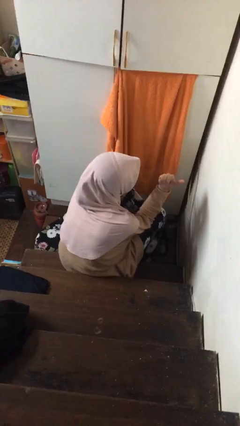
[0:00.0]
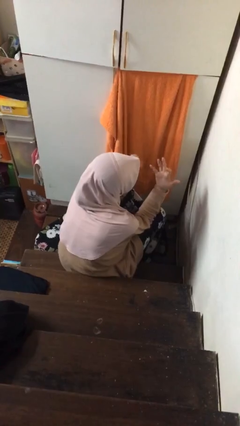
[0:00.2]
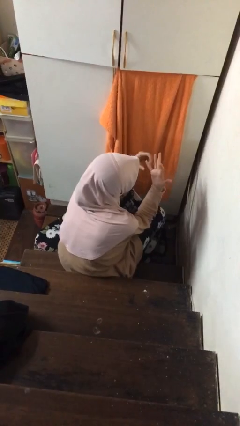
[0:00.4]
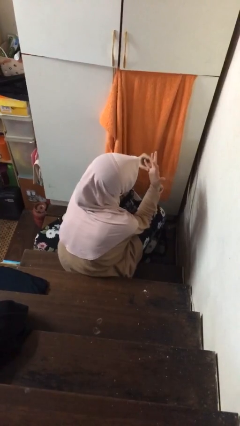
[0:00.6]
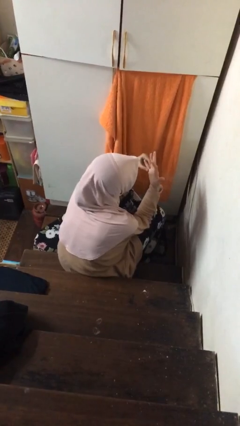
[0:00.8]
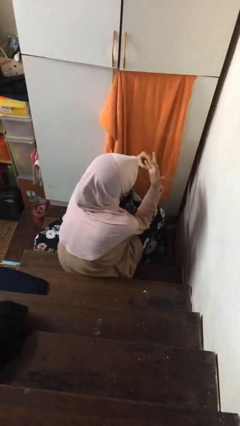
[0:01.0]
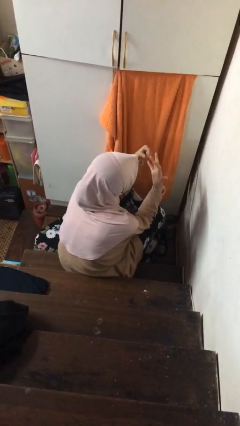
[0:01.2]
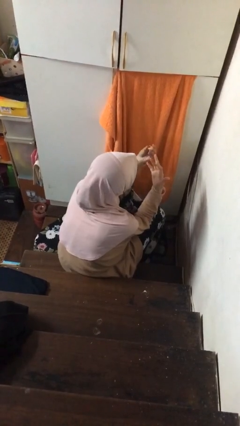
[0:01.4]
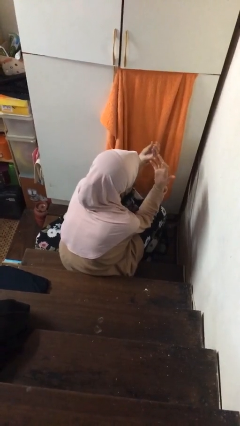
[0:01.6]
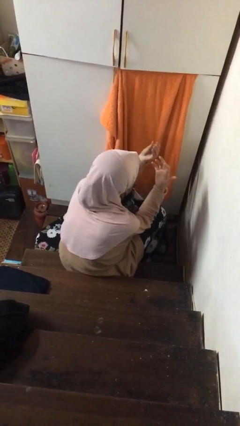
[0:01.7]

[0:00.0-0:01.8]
person takes off ring

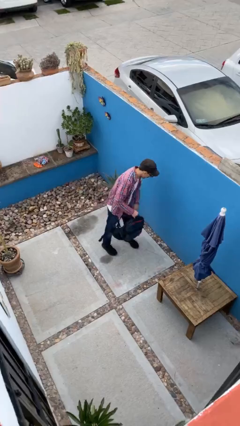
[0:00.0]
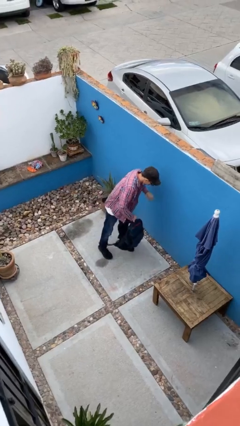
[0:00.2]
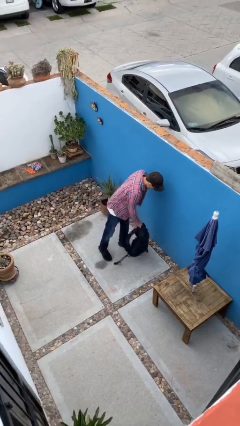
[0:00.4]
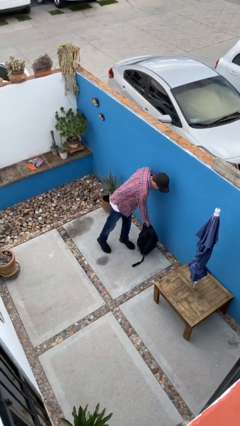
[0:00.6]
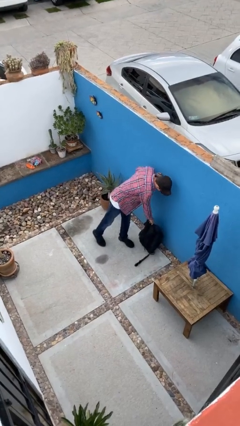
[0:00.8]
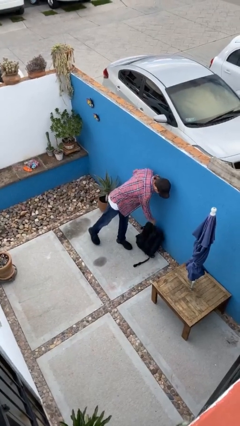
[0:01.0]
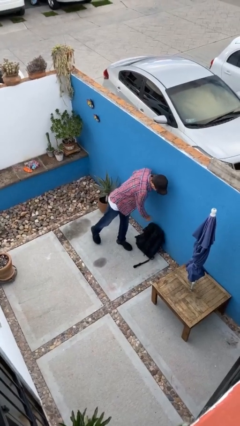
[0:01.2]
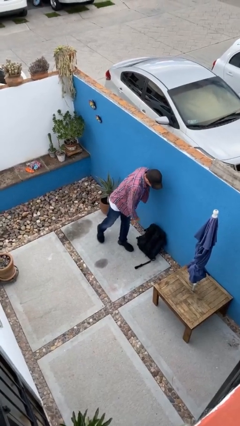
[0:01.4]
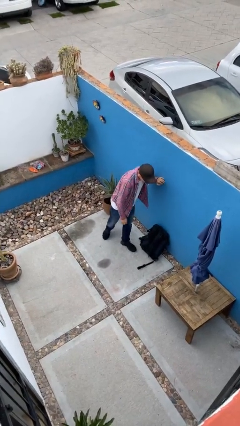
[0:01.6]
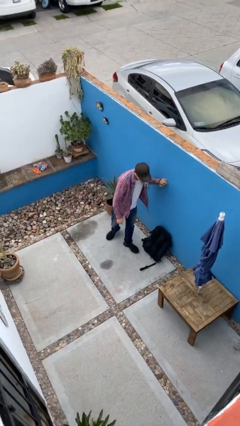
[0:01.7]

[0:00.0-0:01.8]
person puts down object on floor

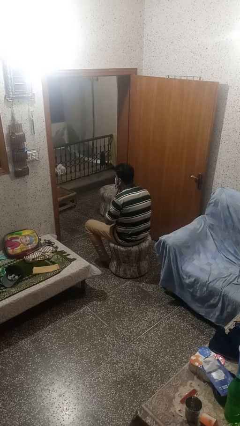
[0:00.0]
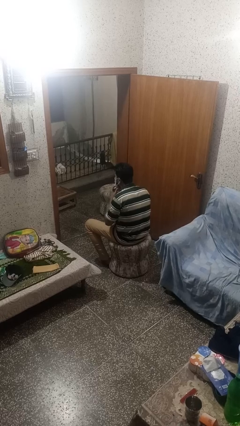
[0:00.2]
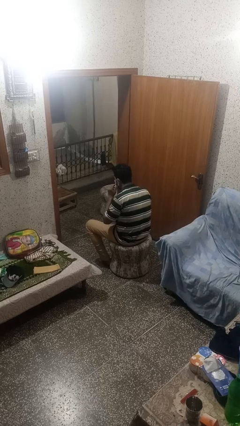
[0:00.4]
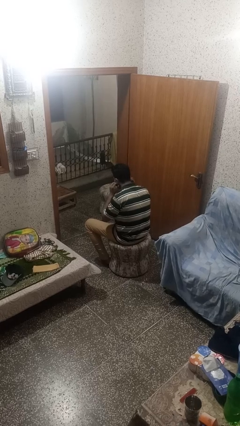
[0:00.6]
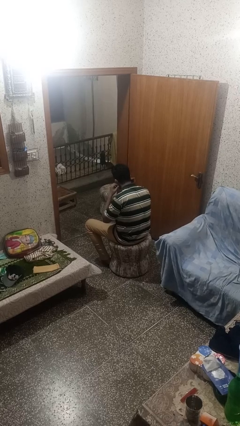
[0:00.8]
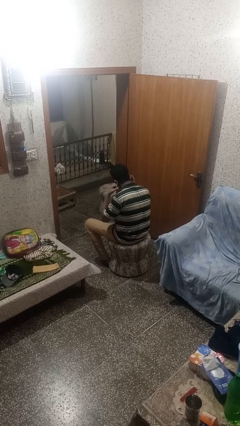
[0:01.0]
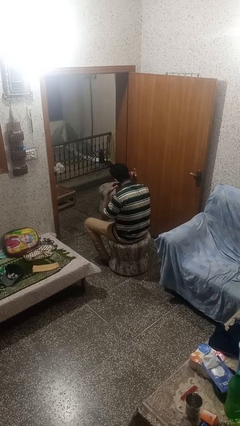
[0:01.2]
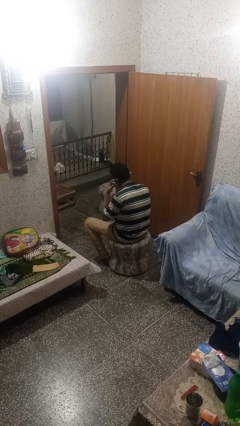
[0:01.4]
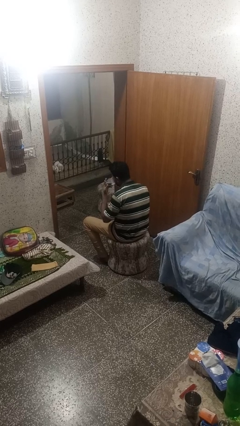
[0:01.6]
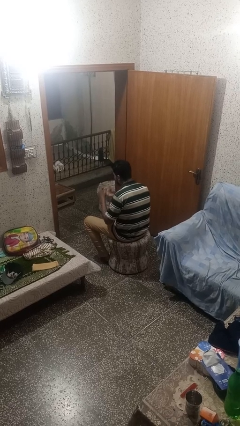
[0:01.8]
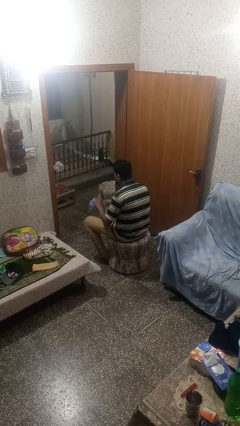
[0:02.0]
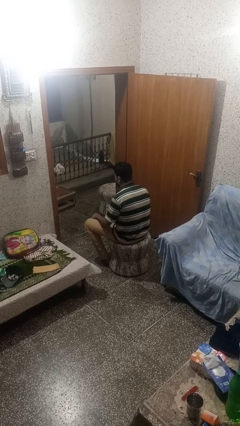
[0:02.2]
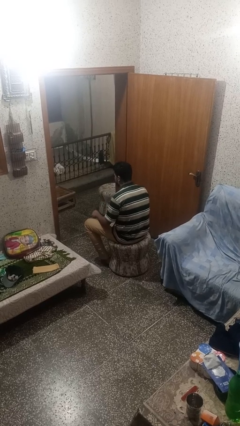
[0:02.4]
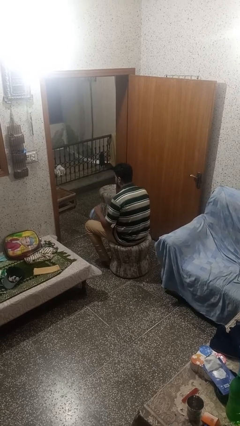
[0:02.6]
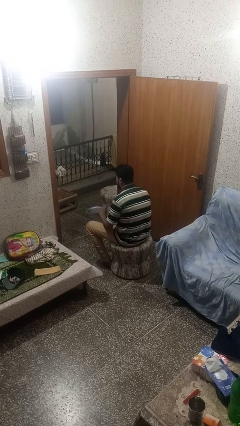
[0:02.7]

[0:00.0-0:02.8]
person takes off facemask

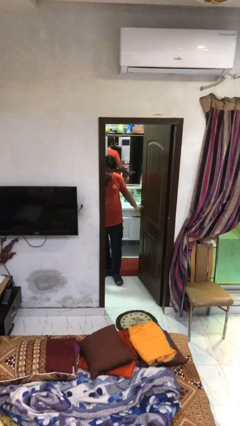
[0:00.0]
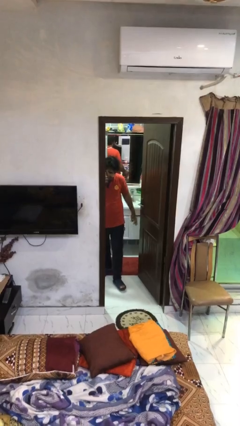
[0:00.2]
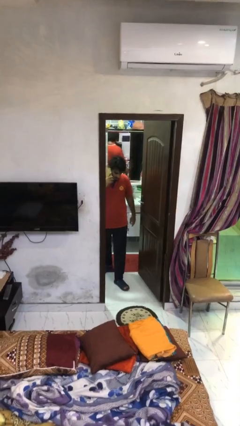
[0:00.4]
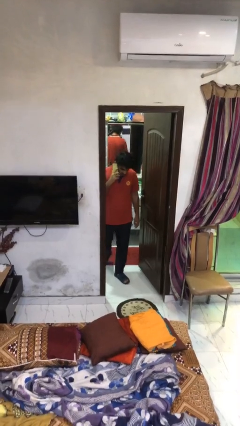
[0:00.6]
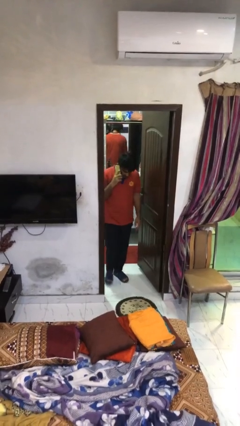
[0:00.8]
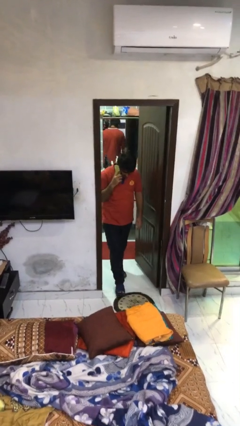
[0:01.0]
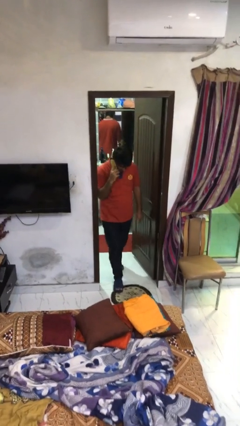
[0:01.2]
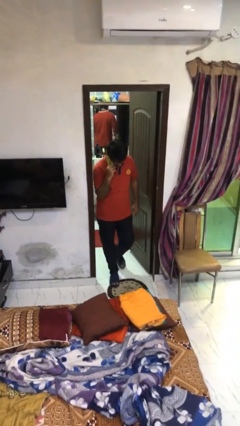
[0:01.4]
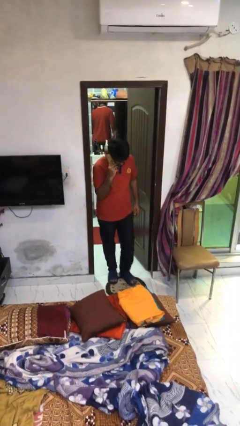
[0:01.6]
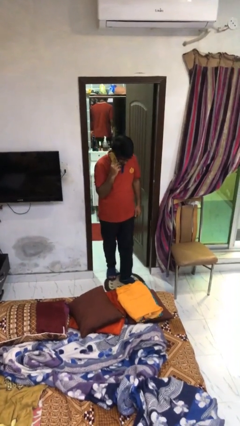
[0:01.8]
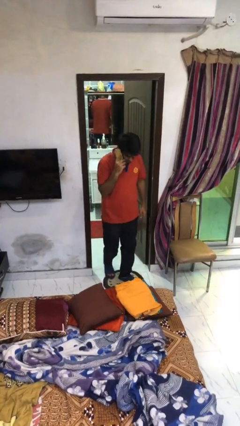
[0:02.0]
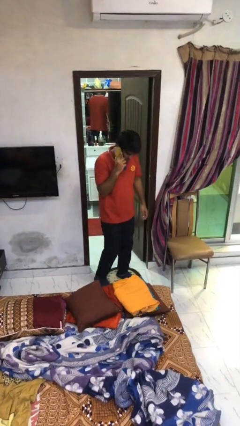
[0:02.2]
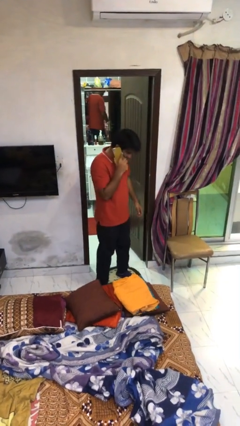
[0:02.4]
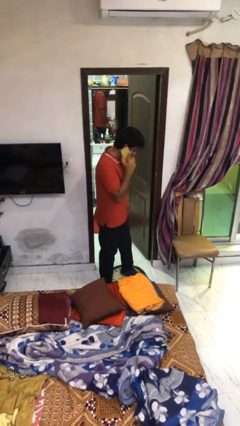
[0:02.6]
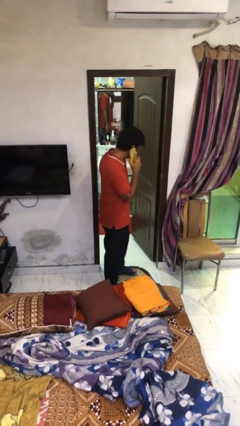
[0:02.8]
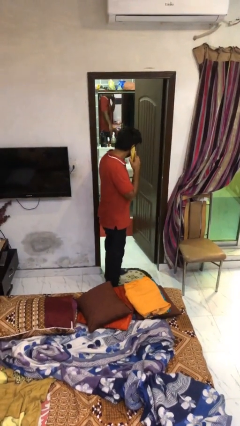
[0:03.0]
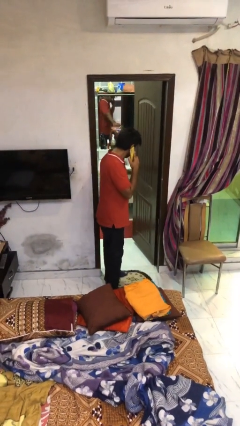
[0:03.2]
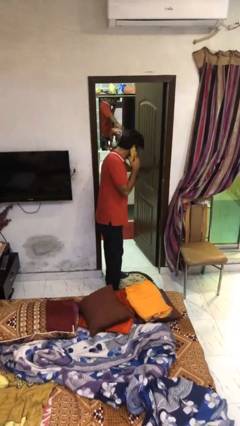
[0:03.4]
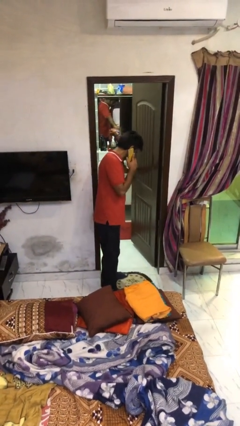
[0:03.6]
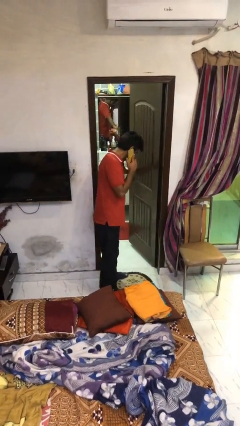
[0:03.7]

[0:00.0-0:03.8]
person enters scene through structure

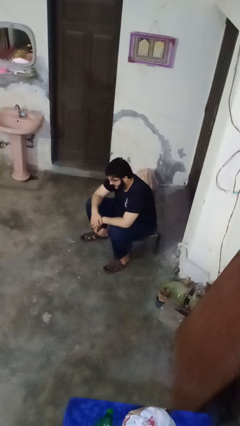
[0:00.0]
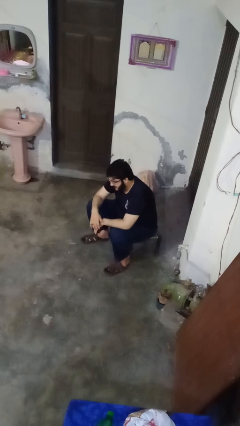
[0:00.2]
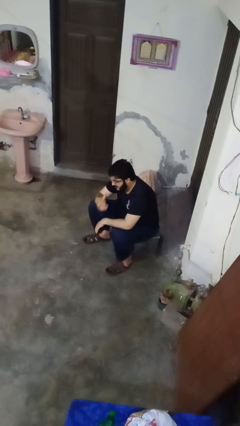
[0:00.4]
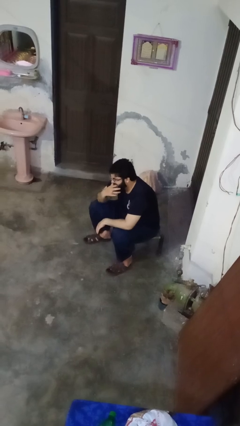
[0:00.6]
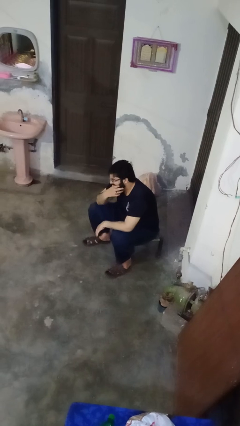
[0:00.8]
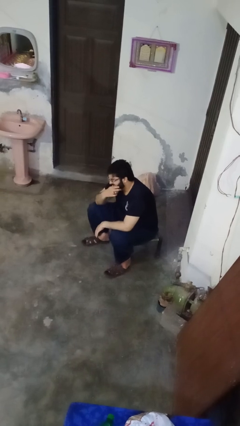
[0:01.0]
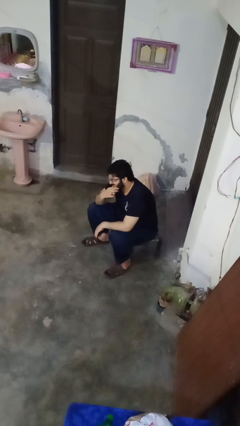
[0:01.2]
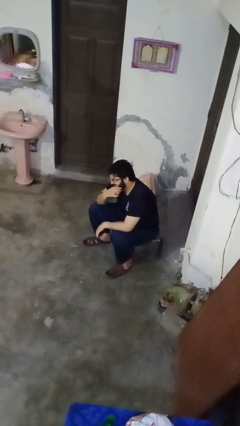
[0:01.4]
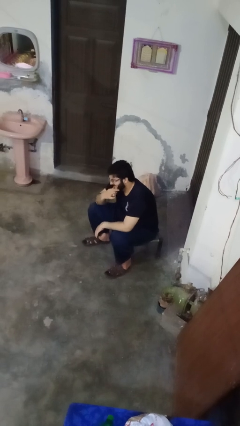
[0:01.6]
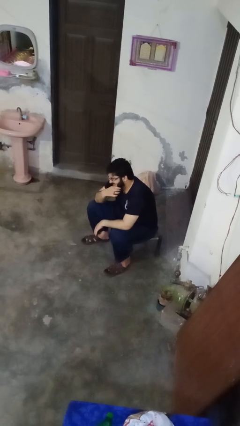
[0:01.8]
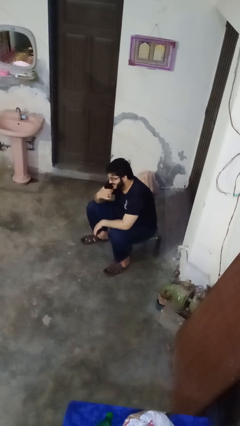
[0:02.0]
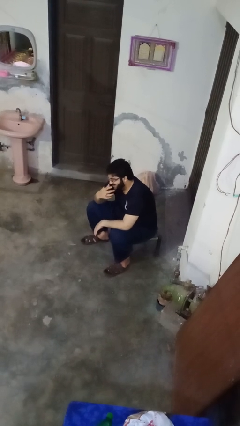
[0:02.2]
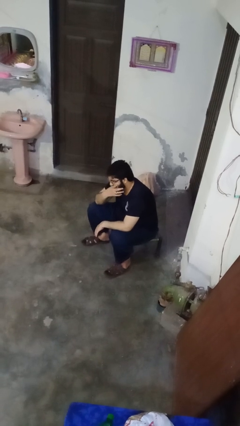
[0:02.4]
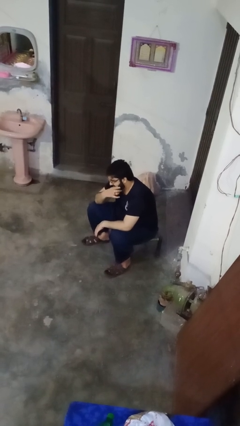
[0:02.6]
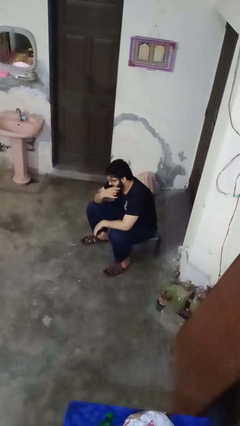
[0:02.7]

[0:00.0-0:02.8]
person strokes chin

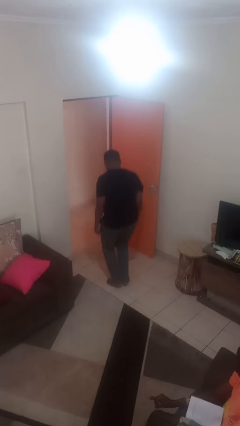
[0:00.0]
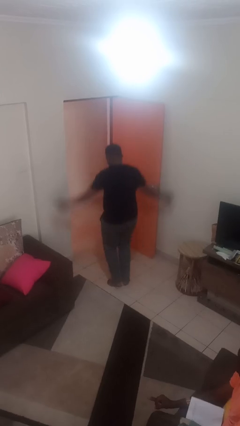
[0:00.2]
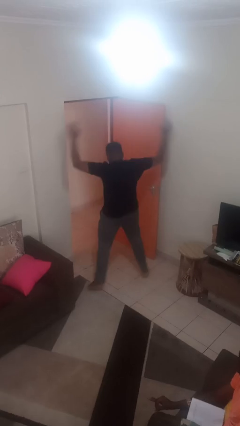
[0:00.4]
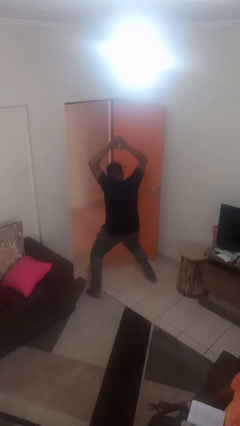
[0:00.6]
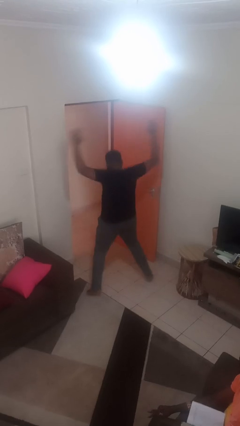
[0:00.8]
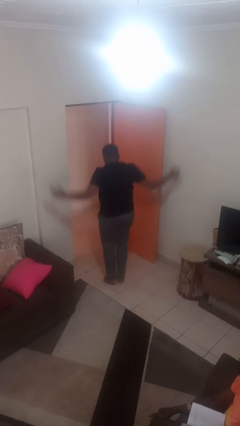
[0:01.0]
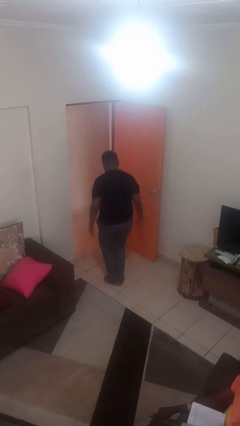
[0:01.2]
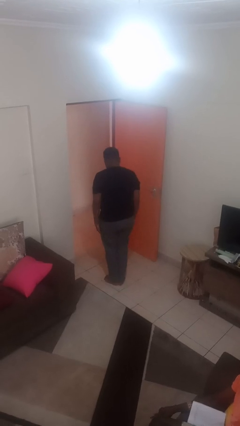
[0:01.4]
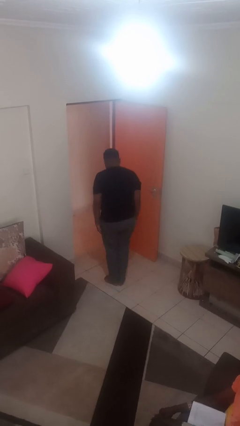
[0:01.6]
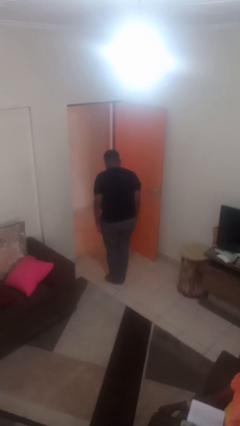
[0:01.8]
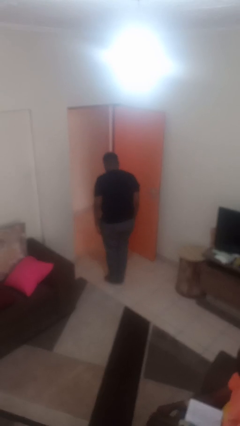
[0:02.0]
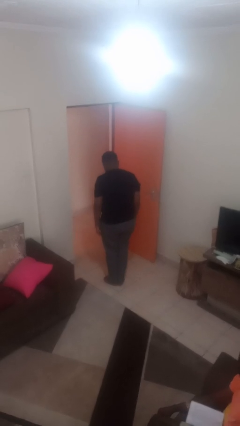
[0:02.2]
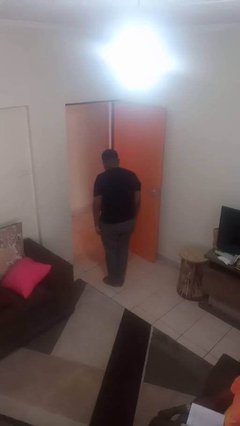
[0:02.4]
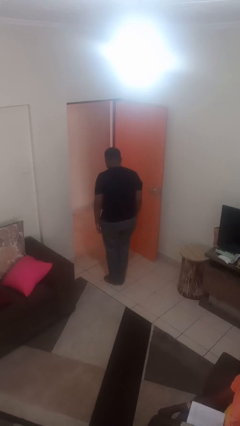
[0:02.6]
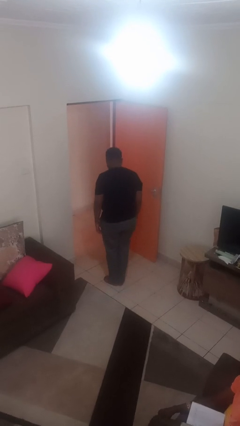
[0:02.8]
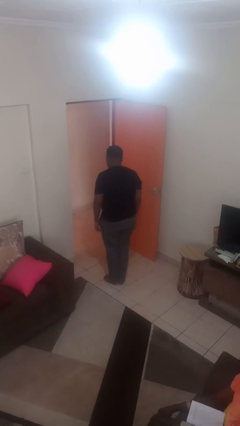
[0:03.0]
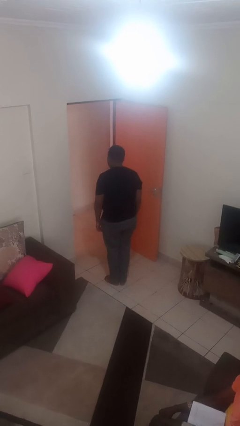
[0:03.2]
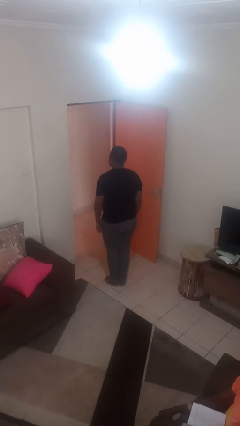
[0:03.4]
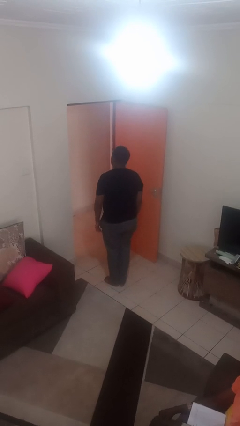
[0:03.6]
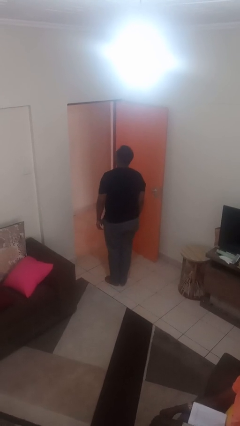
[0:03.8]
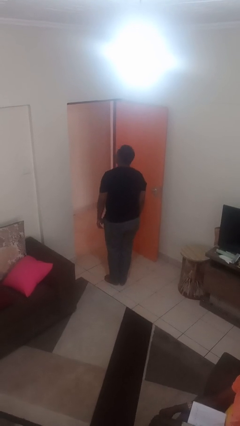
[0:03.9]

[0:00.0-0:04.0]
person exercises with jumping jacks

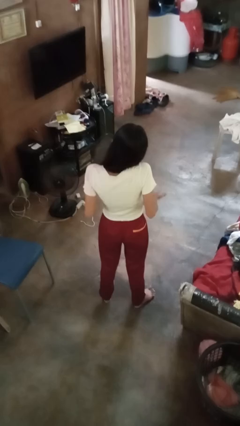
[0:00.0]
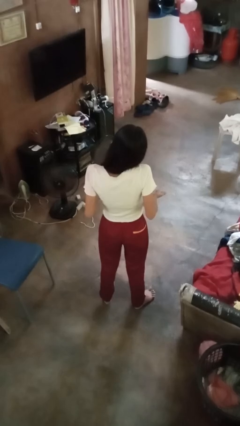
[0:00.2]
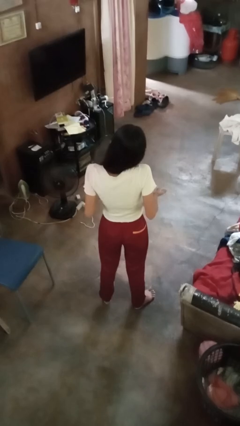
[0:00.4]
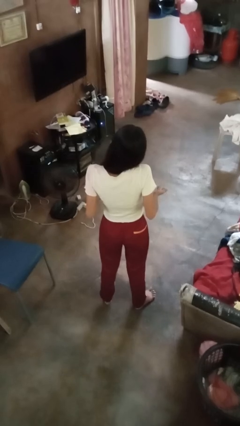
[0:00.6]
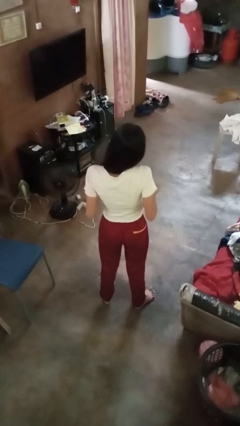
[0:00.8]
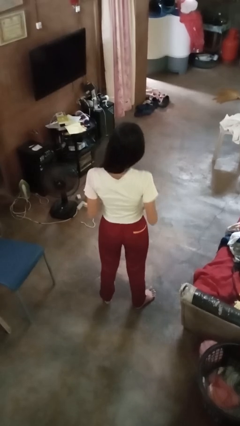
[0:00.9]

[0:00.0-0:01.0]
person shrugs
